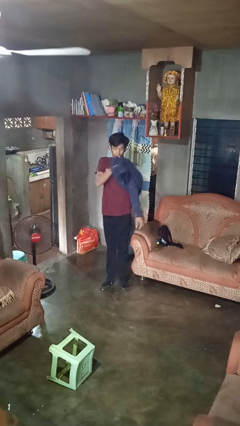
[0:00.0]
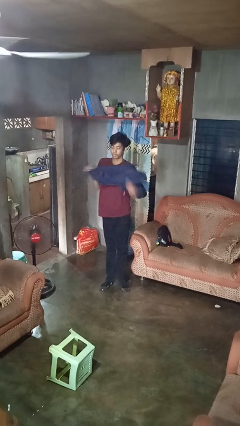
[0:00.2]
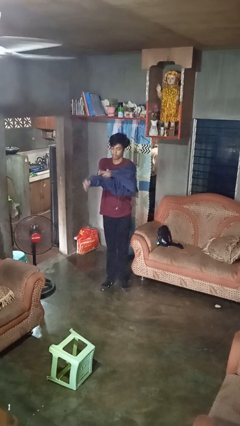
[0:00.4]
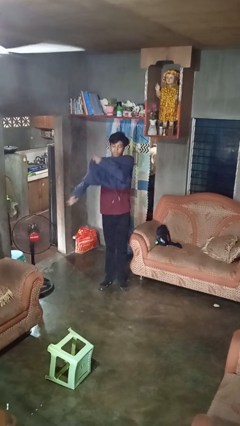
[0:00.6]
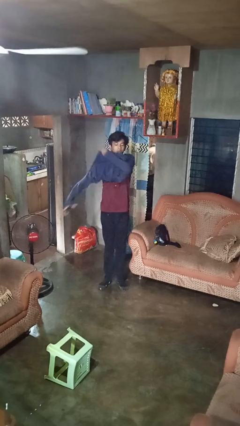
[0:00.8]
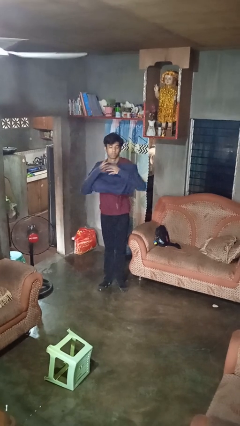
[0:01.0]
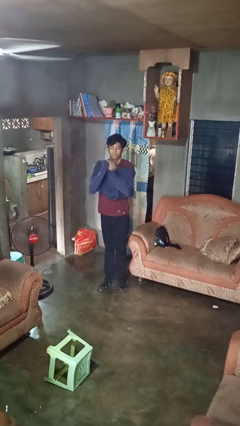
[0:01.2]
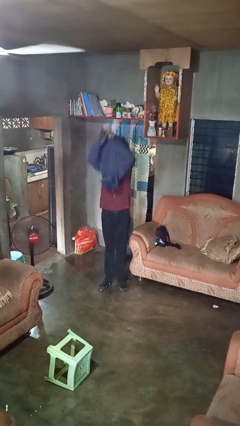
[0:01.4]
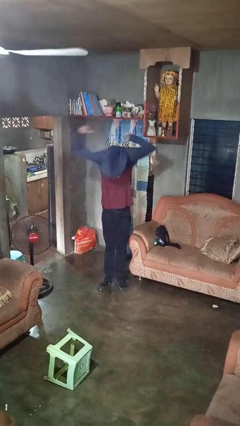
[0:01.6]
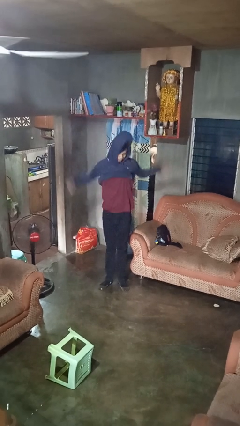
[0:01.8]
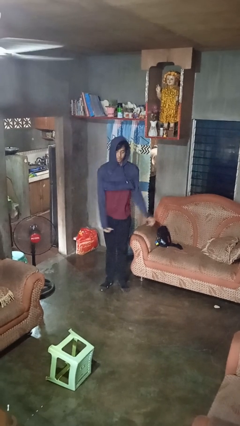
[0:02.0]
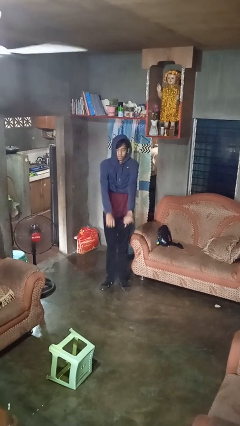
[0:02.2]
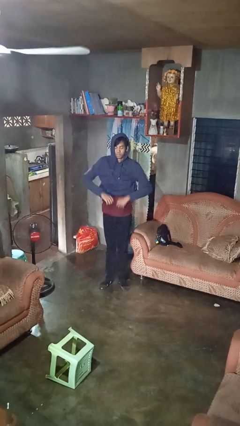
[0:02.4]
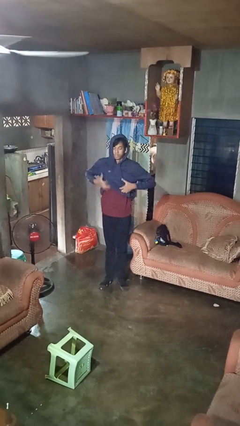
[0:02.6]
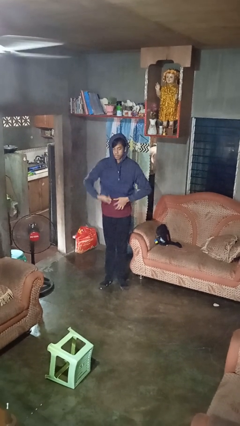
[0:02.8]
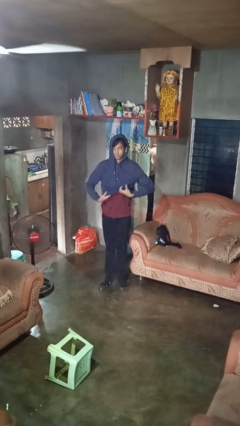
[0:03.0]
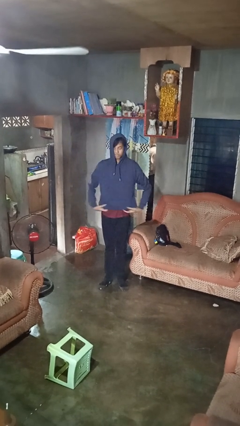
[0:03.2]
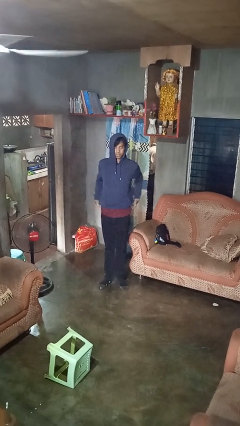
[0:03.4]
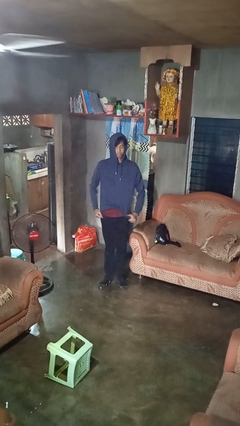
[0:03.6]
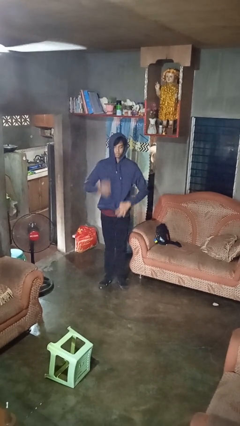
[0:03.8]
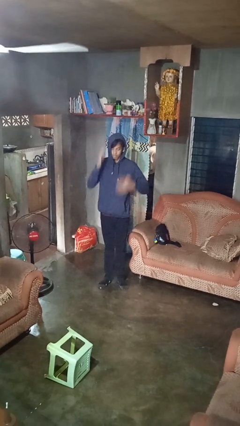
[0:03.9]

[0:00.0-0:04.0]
person puts on hoodie

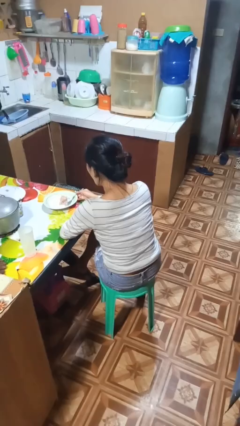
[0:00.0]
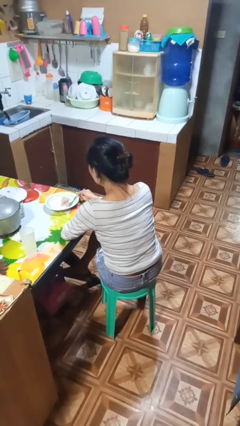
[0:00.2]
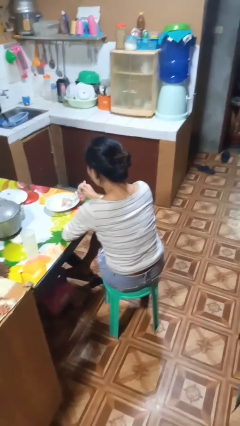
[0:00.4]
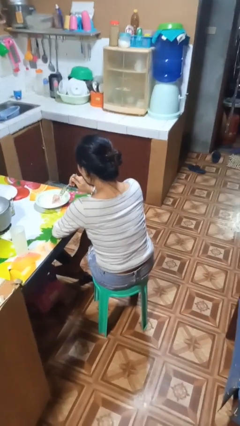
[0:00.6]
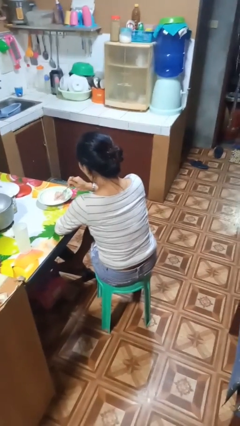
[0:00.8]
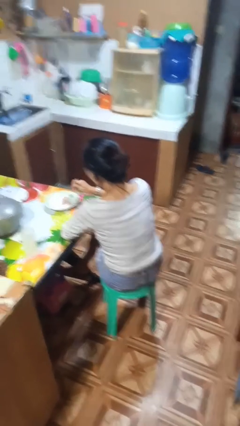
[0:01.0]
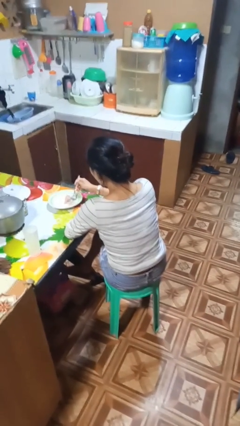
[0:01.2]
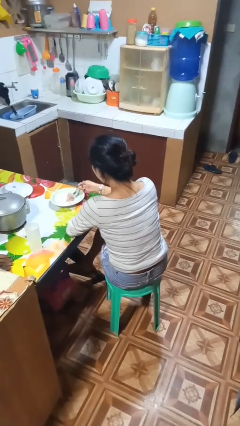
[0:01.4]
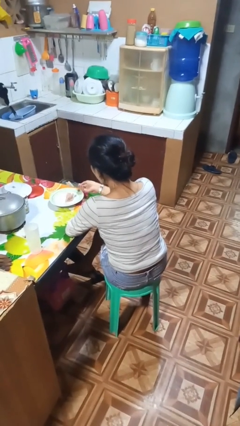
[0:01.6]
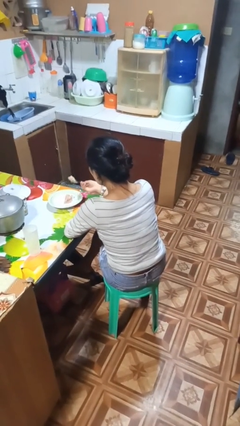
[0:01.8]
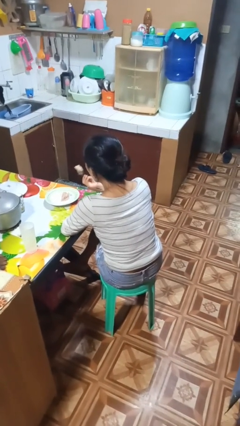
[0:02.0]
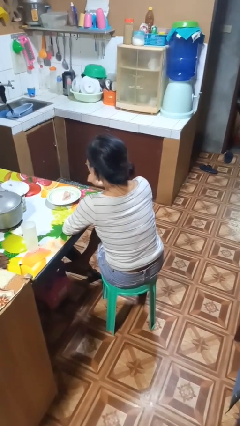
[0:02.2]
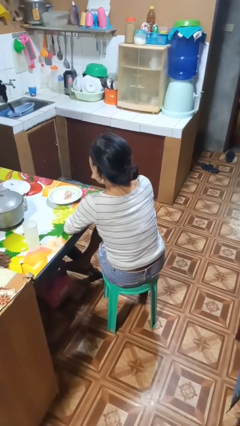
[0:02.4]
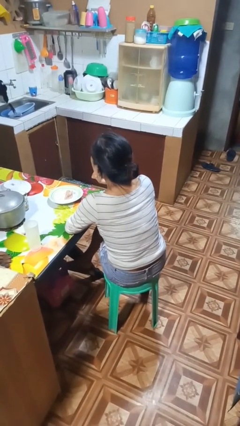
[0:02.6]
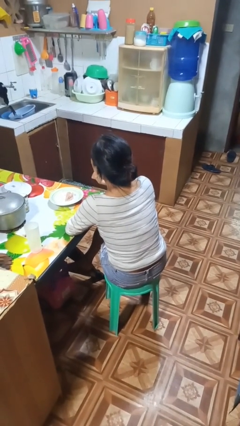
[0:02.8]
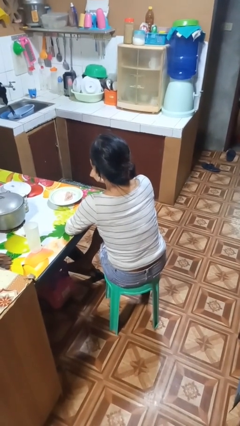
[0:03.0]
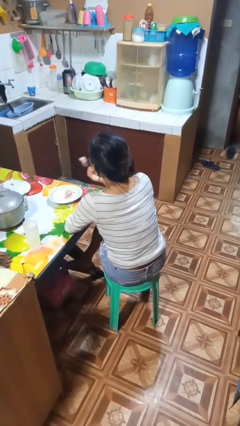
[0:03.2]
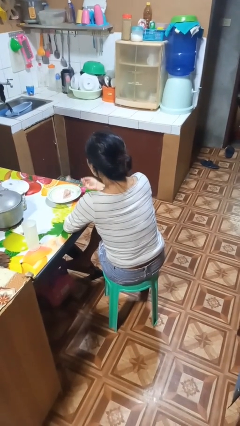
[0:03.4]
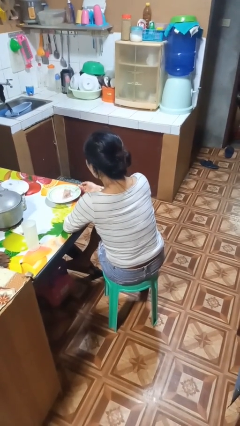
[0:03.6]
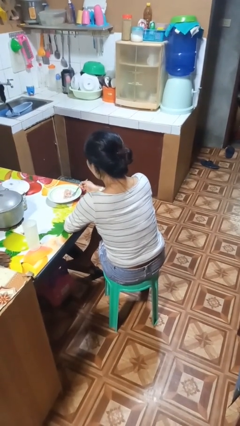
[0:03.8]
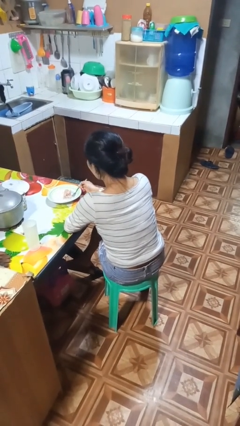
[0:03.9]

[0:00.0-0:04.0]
person eats with utensil

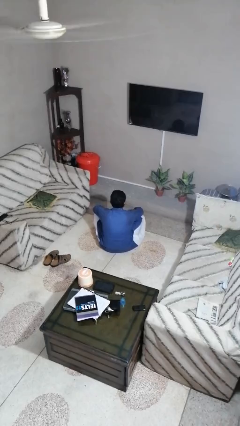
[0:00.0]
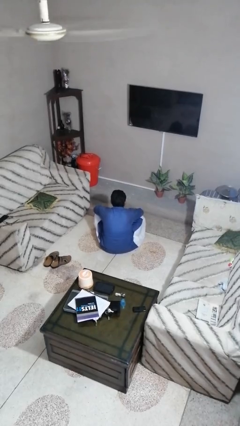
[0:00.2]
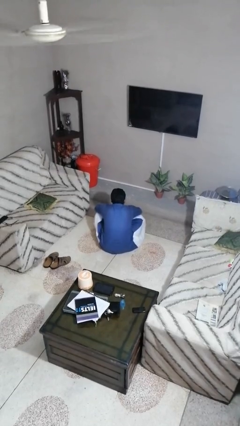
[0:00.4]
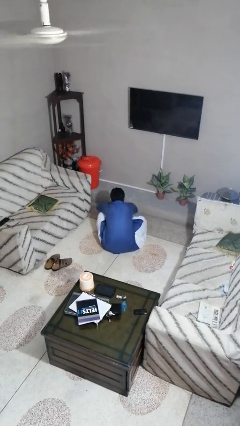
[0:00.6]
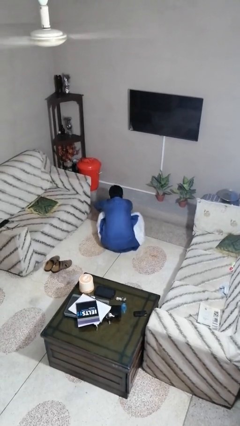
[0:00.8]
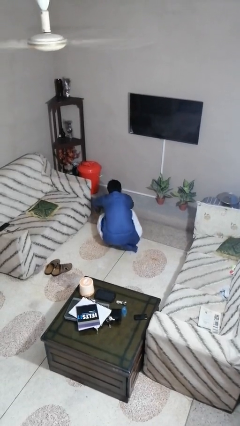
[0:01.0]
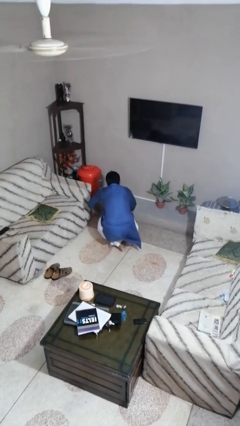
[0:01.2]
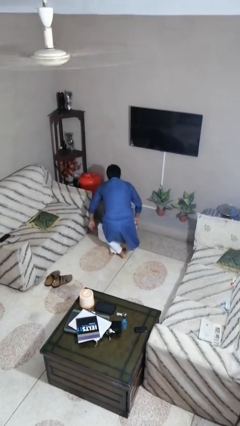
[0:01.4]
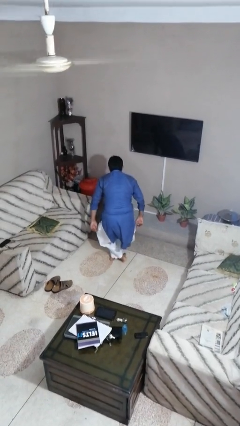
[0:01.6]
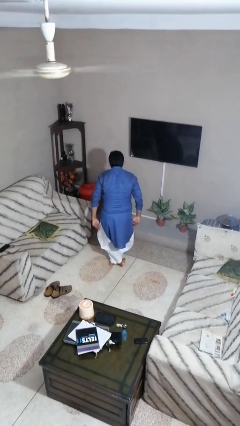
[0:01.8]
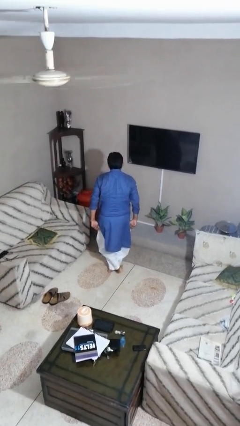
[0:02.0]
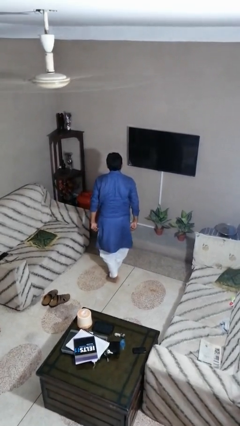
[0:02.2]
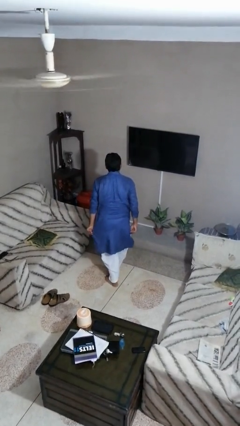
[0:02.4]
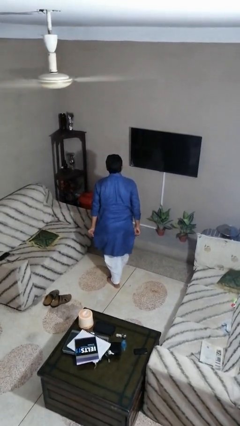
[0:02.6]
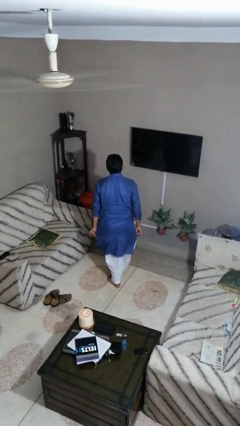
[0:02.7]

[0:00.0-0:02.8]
person stands up from floor

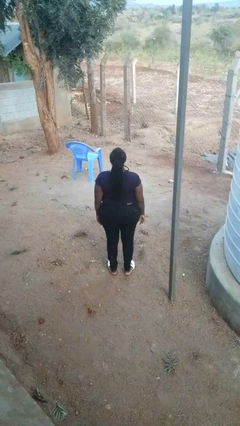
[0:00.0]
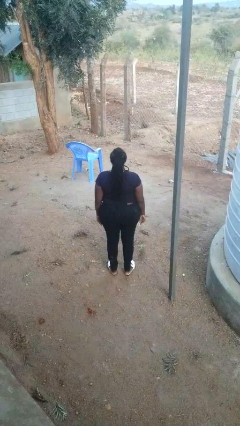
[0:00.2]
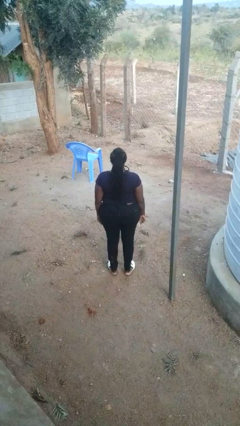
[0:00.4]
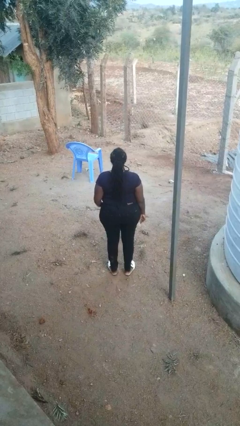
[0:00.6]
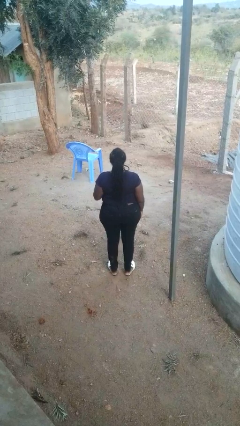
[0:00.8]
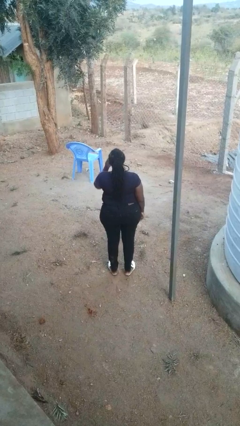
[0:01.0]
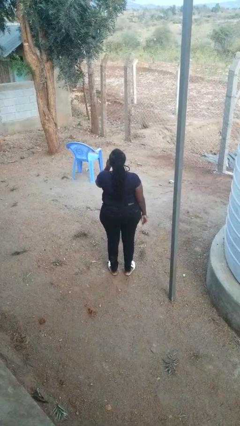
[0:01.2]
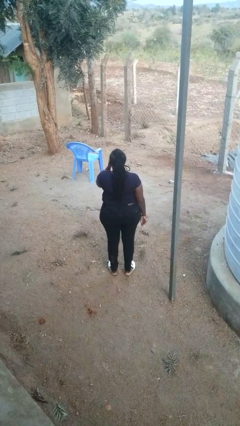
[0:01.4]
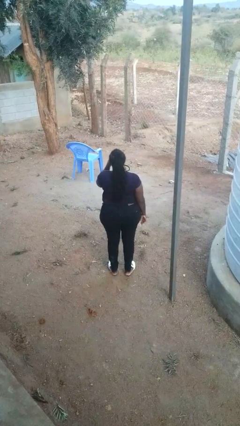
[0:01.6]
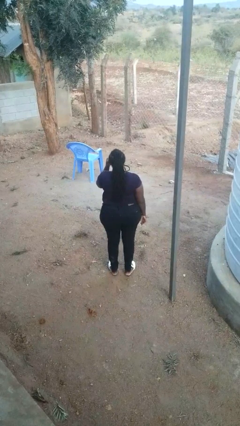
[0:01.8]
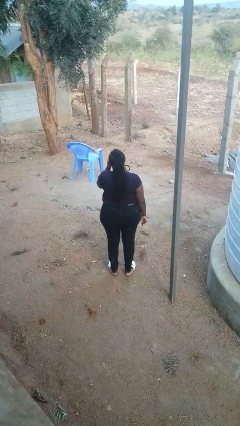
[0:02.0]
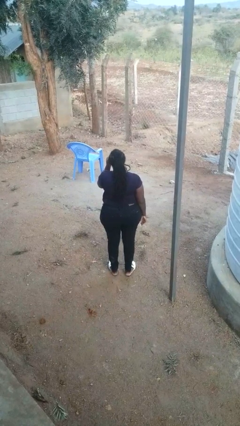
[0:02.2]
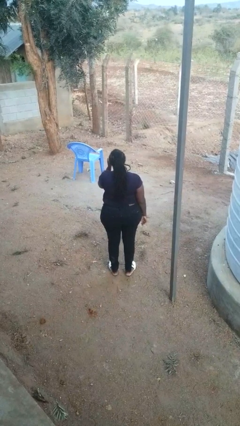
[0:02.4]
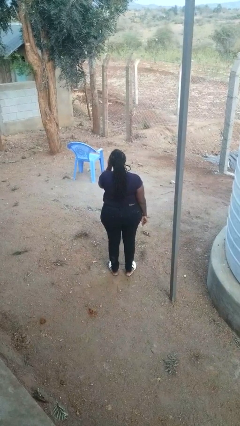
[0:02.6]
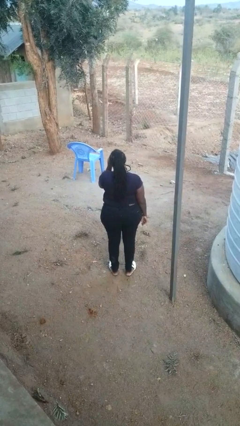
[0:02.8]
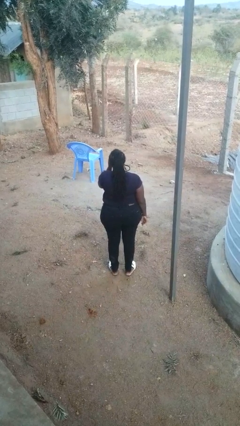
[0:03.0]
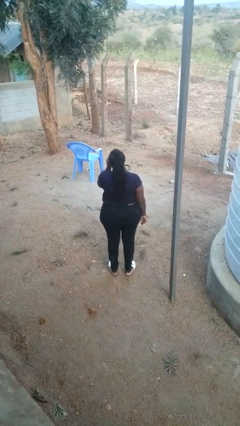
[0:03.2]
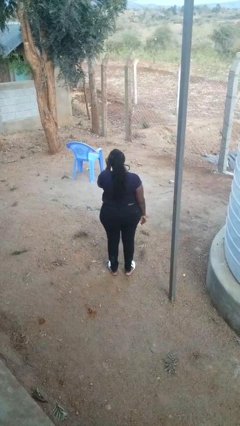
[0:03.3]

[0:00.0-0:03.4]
person rubs eyes

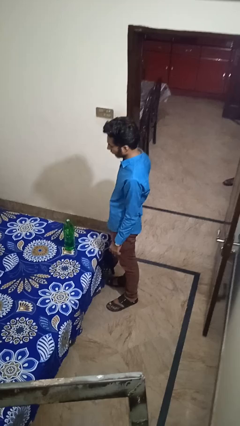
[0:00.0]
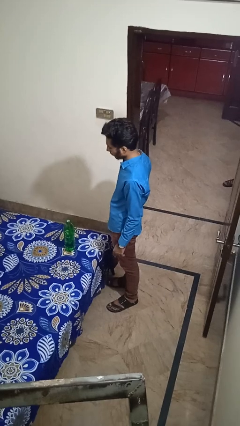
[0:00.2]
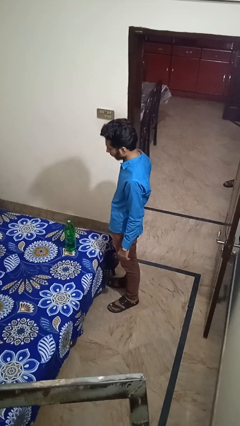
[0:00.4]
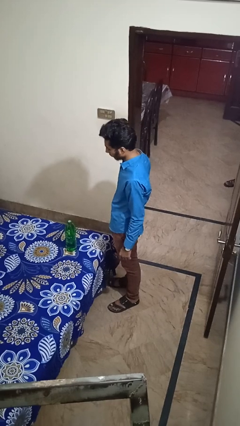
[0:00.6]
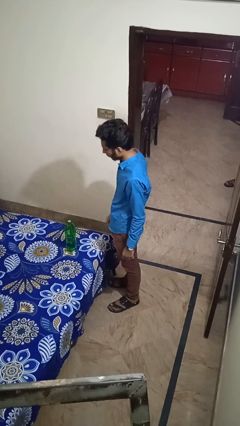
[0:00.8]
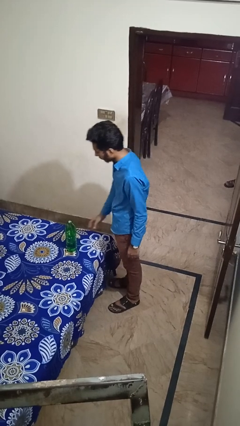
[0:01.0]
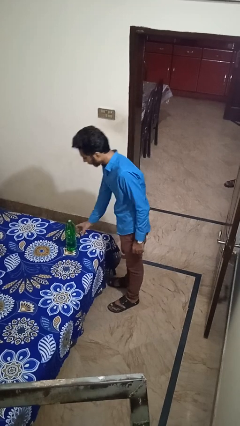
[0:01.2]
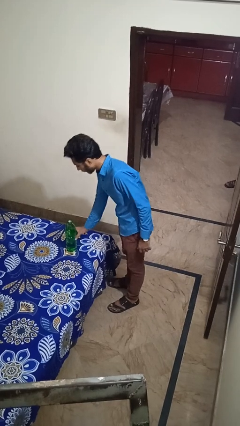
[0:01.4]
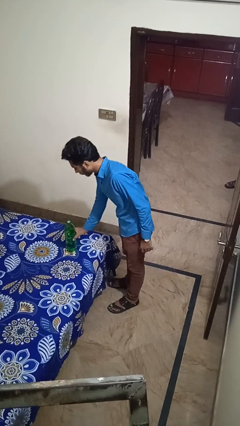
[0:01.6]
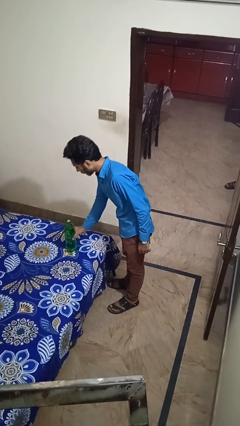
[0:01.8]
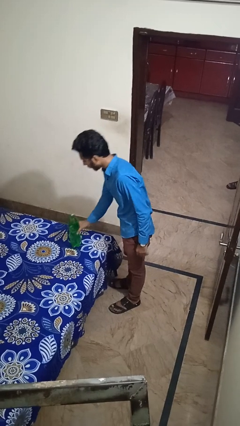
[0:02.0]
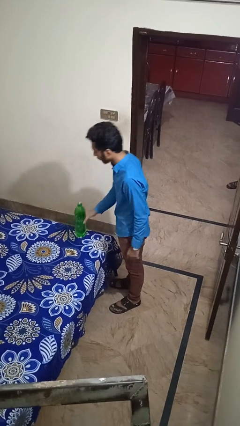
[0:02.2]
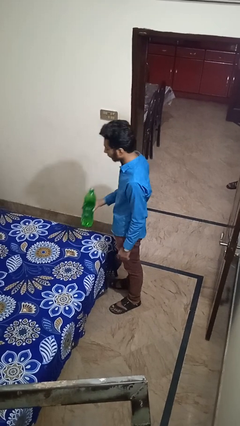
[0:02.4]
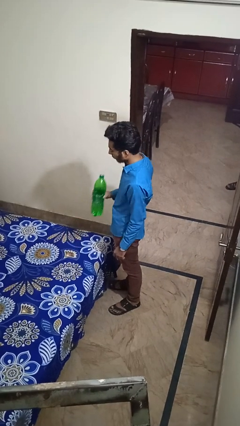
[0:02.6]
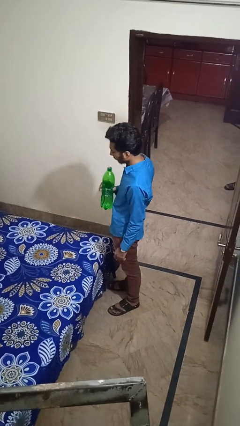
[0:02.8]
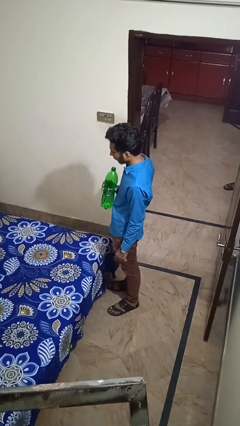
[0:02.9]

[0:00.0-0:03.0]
person picks up object from bed
